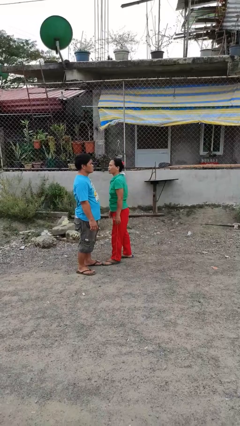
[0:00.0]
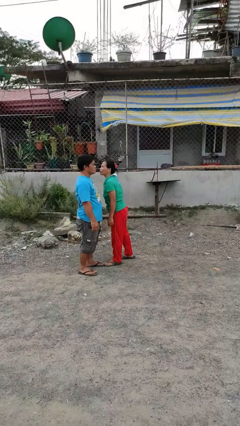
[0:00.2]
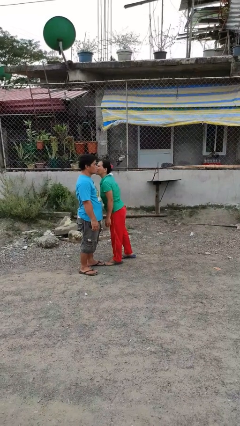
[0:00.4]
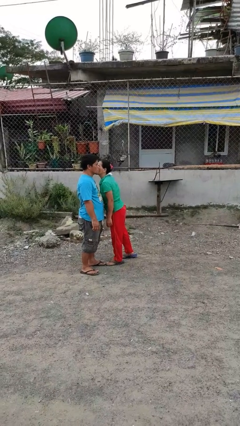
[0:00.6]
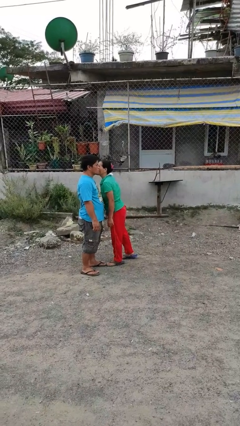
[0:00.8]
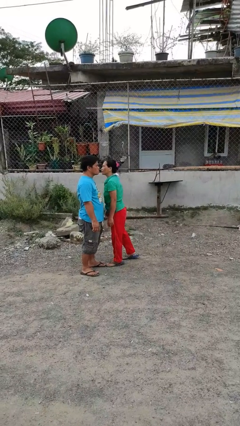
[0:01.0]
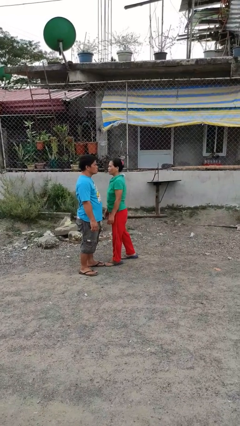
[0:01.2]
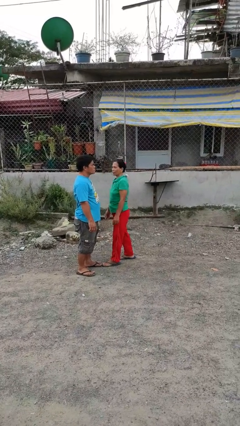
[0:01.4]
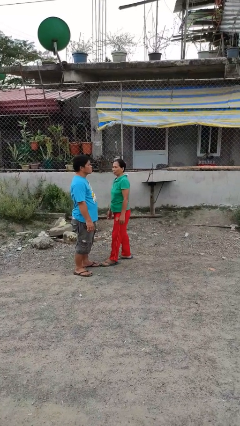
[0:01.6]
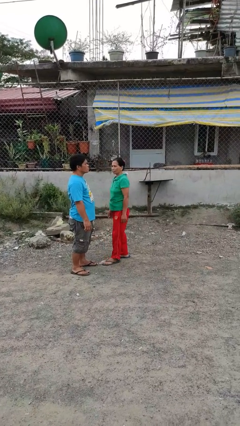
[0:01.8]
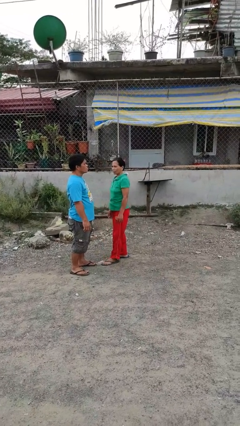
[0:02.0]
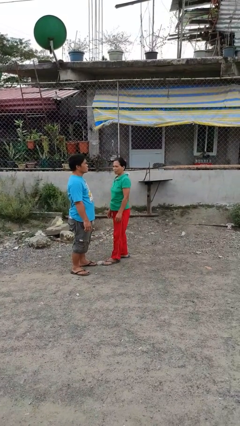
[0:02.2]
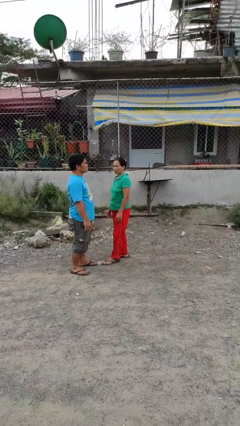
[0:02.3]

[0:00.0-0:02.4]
person kisses cheek of person

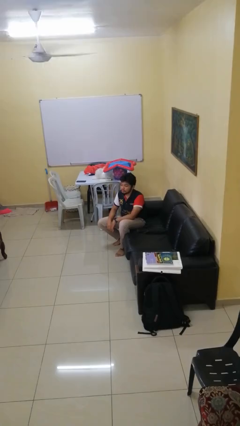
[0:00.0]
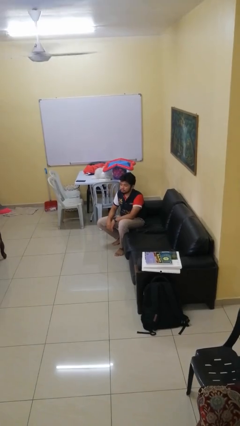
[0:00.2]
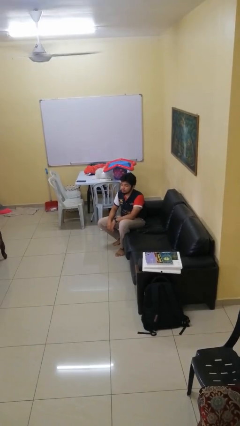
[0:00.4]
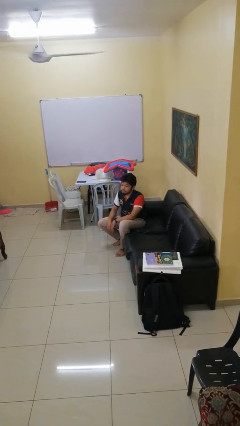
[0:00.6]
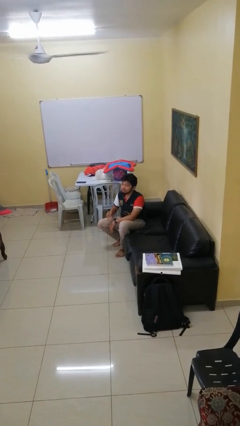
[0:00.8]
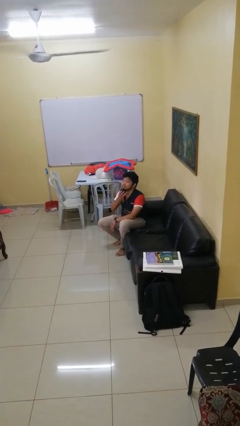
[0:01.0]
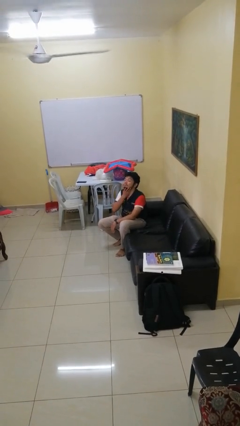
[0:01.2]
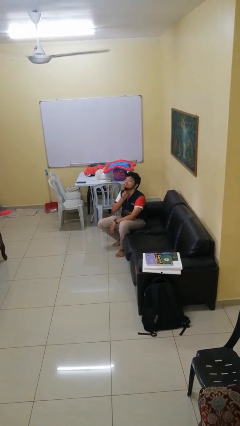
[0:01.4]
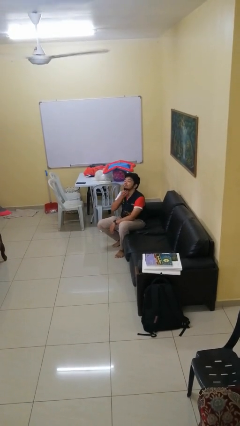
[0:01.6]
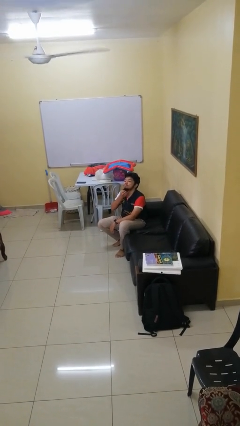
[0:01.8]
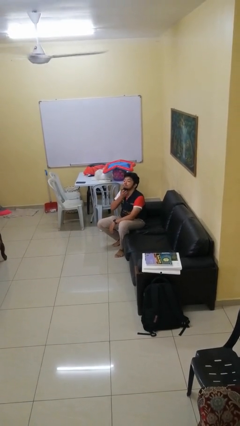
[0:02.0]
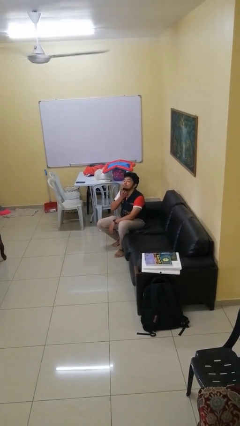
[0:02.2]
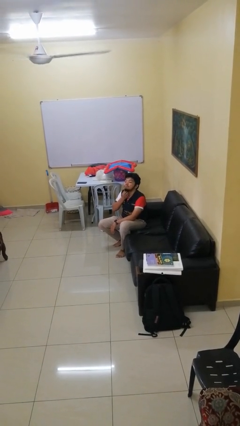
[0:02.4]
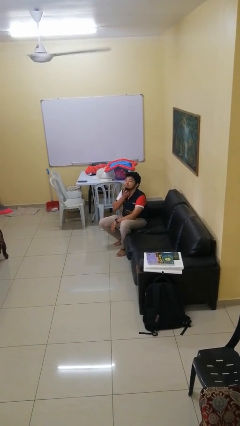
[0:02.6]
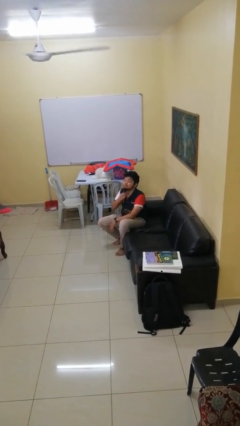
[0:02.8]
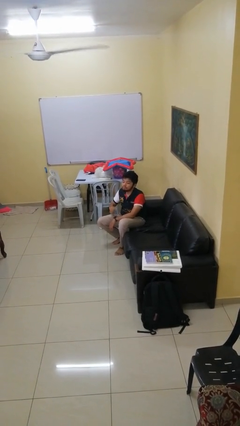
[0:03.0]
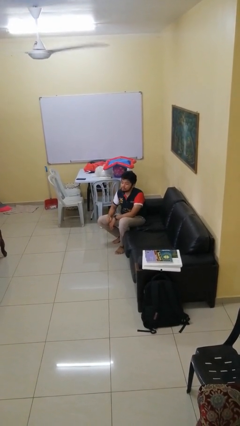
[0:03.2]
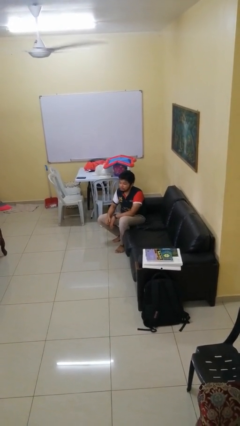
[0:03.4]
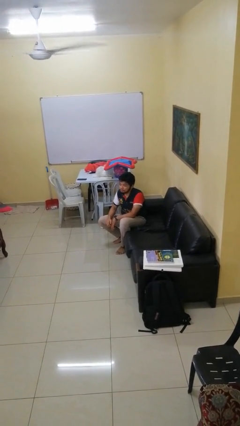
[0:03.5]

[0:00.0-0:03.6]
person scratches face

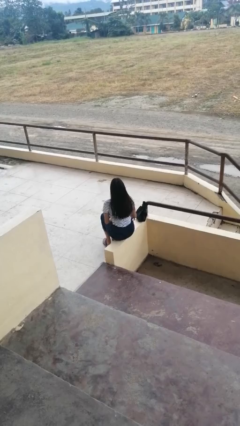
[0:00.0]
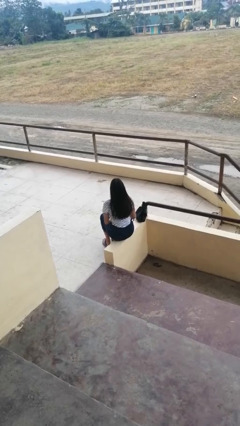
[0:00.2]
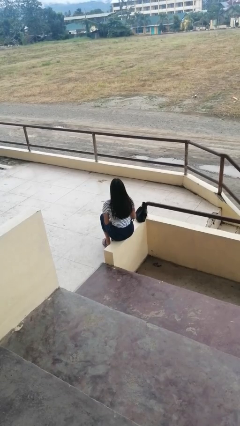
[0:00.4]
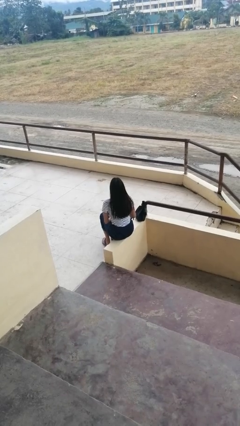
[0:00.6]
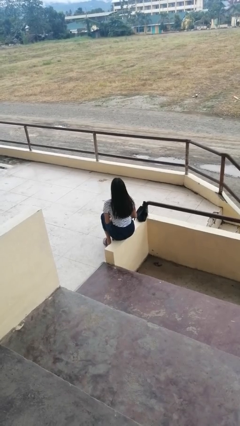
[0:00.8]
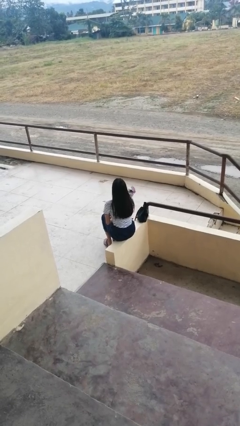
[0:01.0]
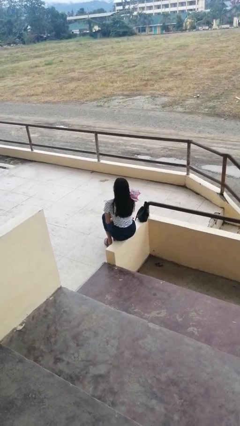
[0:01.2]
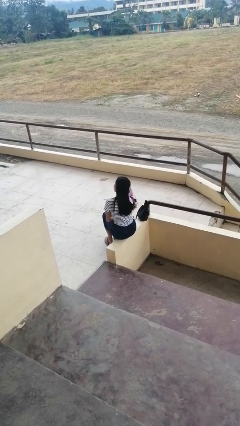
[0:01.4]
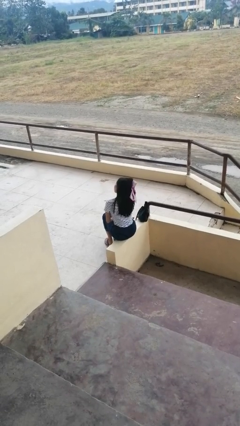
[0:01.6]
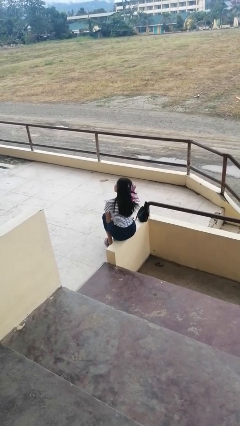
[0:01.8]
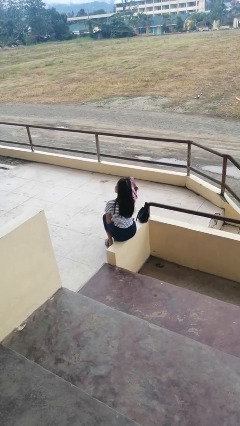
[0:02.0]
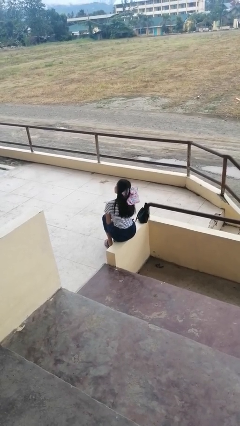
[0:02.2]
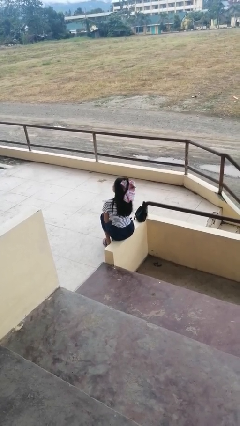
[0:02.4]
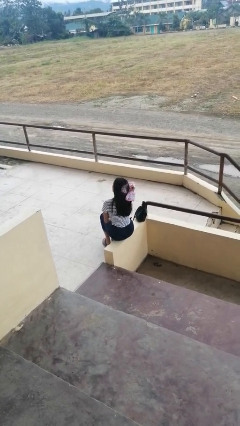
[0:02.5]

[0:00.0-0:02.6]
person dries hair with towel

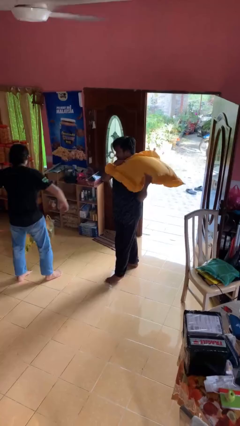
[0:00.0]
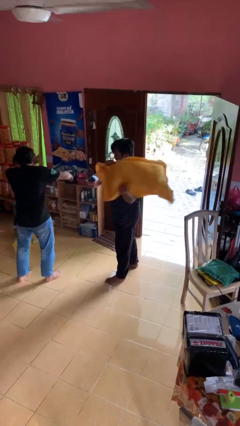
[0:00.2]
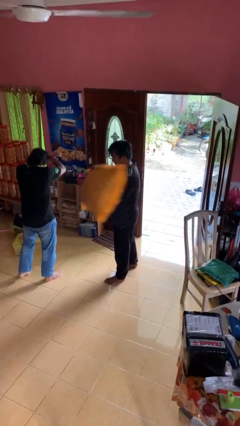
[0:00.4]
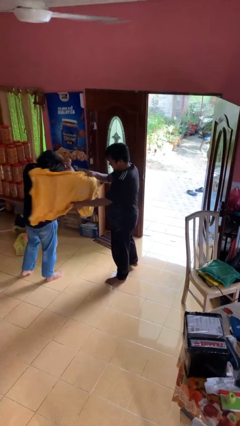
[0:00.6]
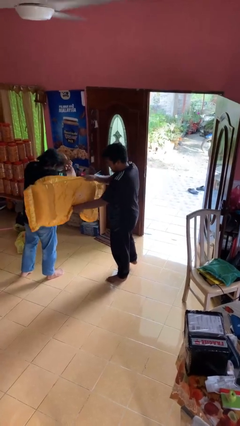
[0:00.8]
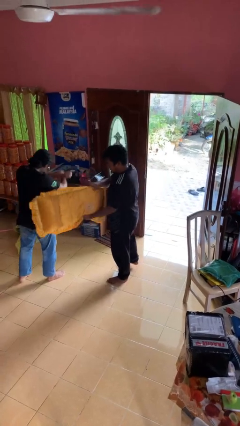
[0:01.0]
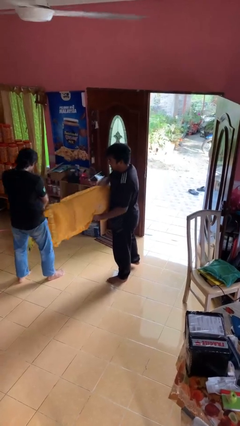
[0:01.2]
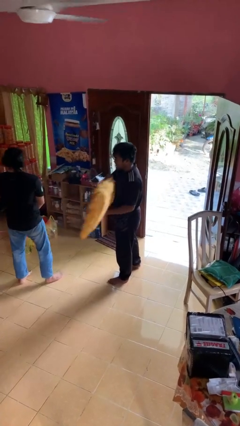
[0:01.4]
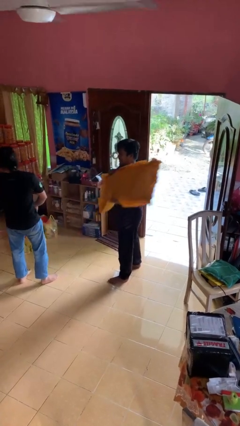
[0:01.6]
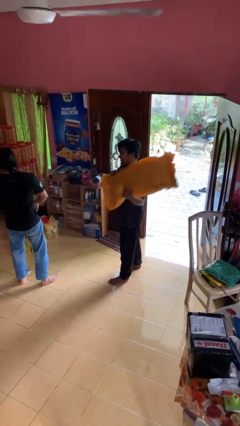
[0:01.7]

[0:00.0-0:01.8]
person hits person with pillow

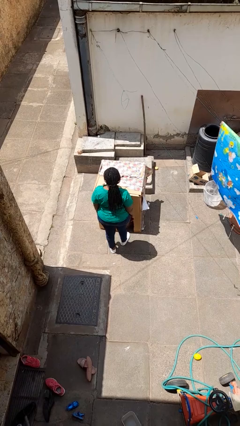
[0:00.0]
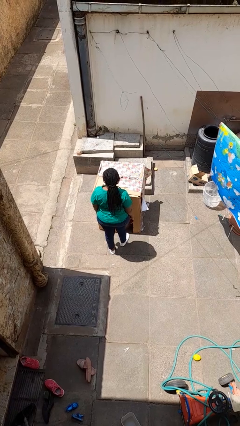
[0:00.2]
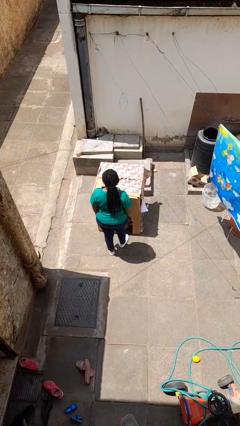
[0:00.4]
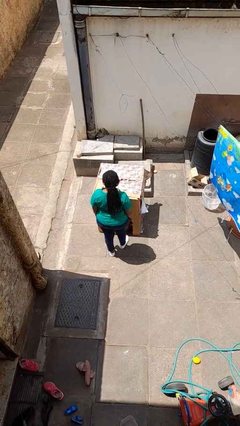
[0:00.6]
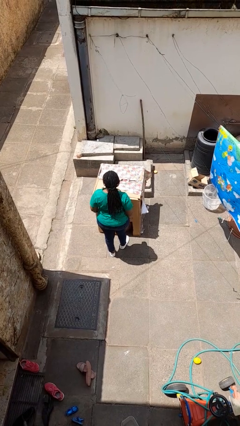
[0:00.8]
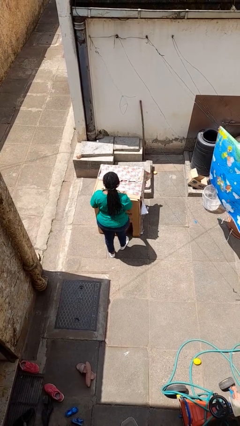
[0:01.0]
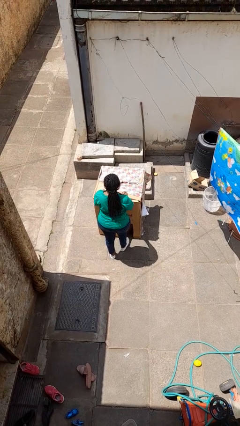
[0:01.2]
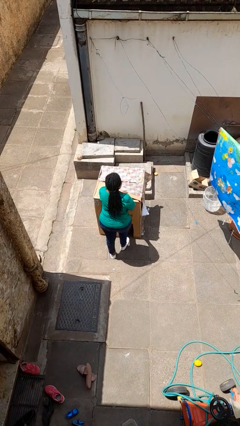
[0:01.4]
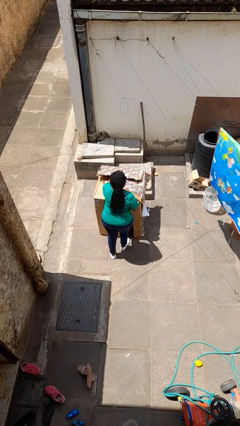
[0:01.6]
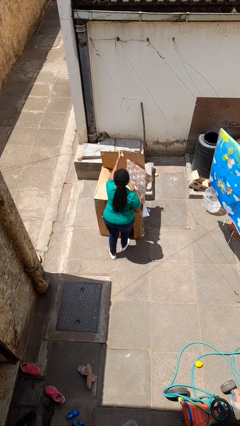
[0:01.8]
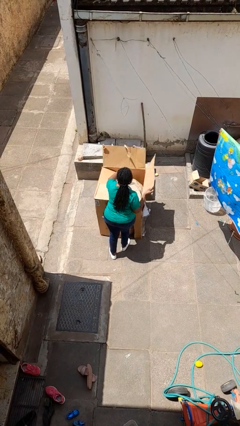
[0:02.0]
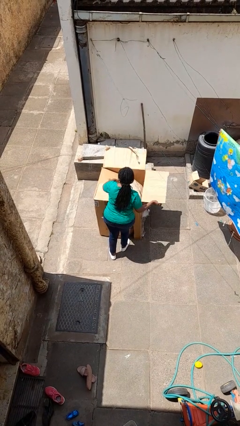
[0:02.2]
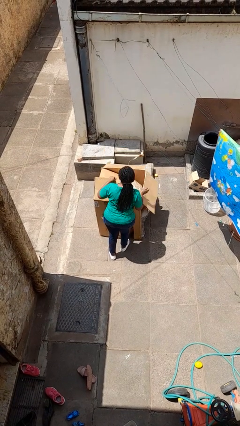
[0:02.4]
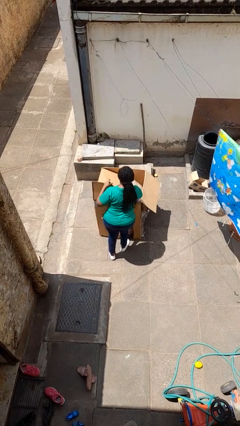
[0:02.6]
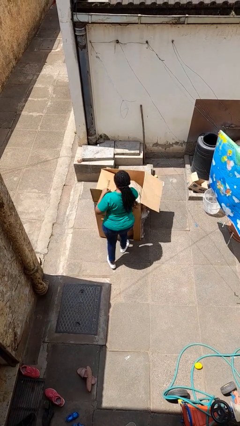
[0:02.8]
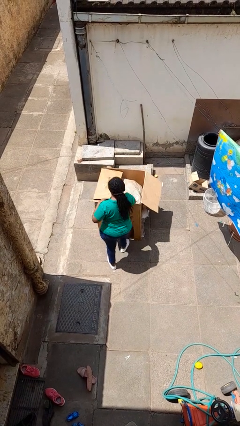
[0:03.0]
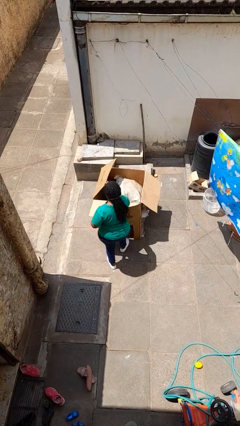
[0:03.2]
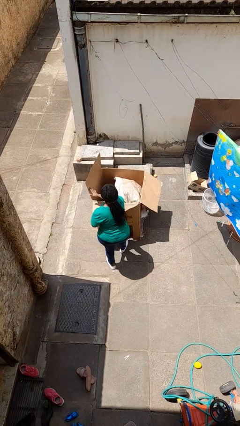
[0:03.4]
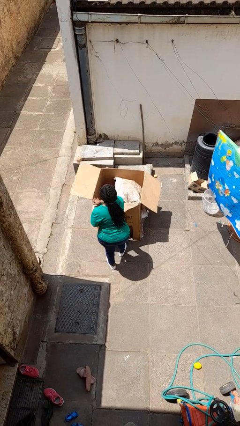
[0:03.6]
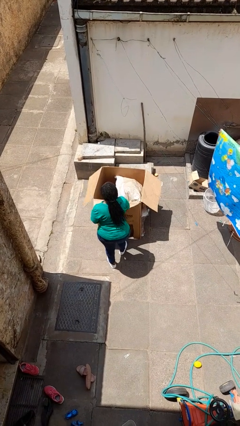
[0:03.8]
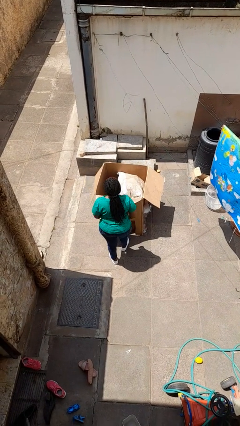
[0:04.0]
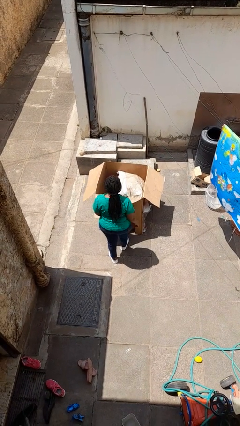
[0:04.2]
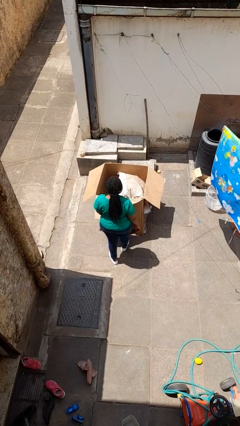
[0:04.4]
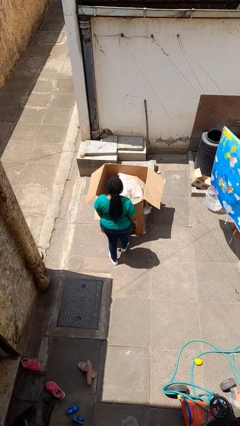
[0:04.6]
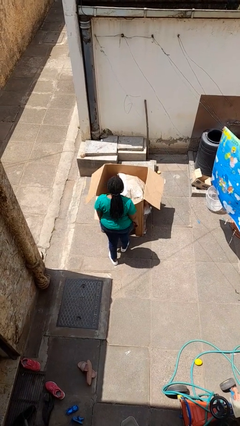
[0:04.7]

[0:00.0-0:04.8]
person opens box

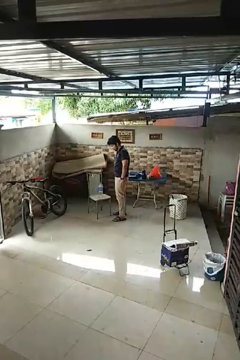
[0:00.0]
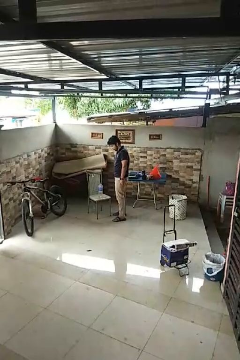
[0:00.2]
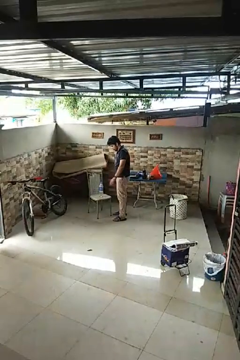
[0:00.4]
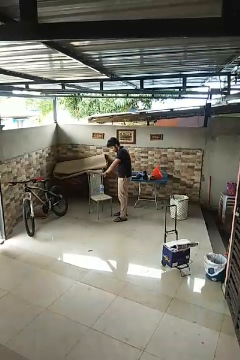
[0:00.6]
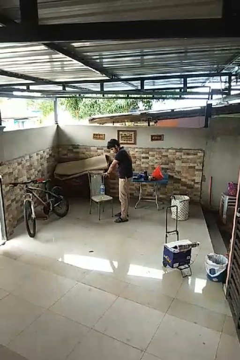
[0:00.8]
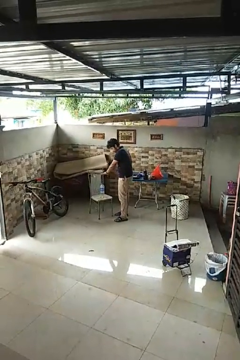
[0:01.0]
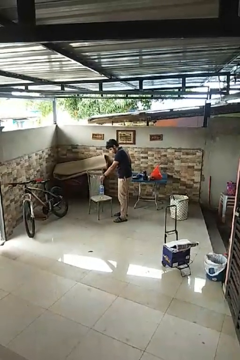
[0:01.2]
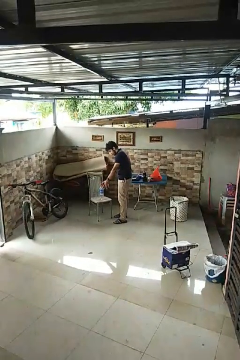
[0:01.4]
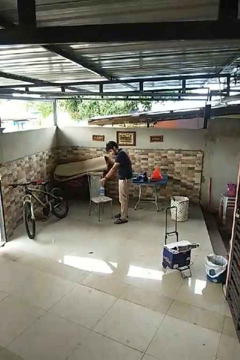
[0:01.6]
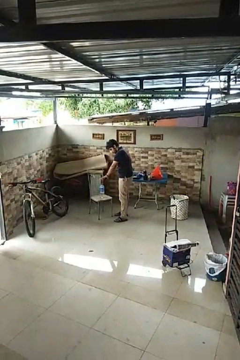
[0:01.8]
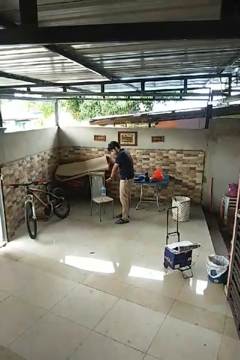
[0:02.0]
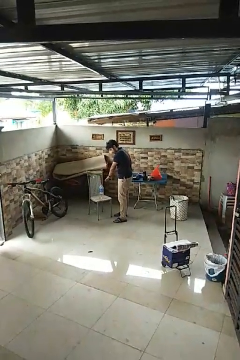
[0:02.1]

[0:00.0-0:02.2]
person waves hand over object

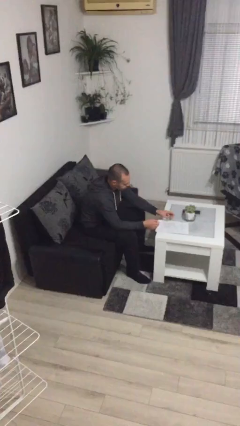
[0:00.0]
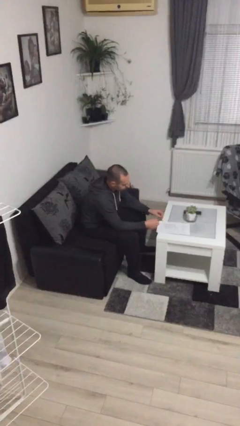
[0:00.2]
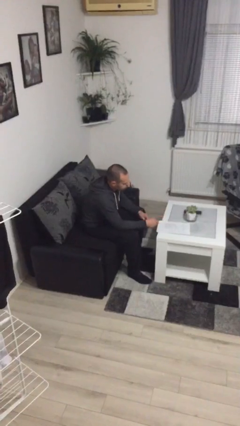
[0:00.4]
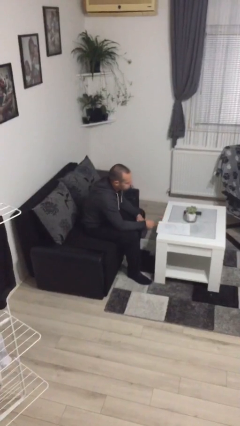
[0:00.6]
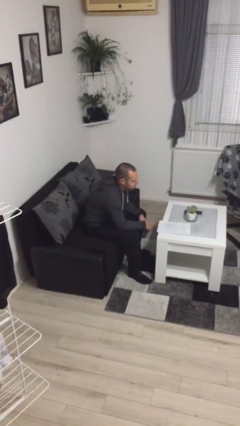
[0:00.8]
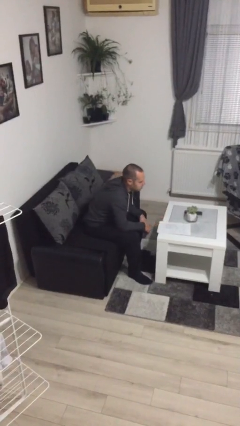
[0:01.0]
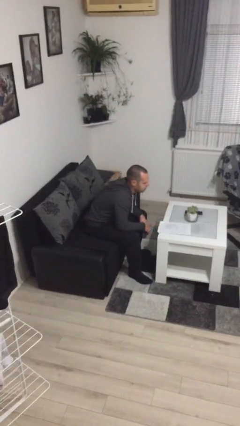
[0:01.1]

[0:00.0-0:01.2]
person puts down object on table
